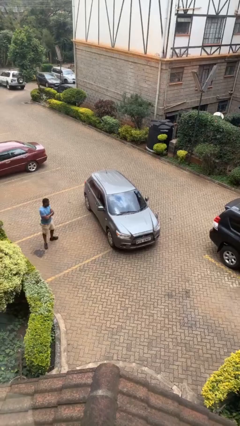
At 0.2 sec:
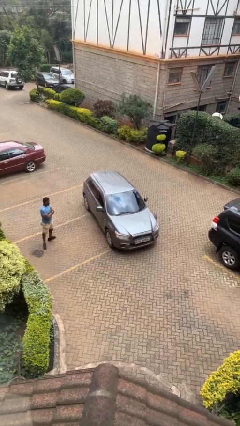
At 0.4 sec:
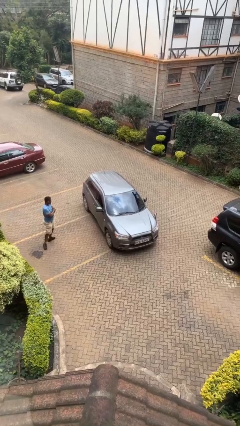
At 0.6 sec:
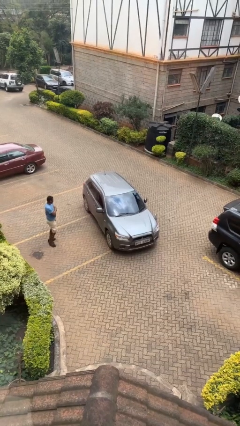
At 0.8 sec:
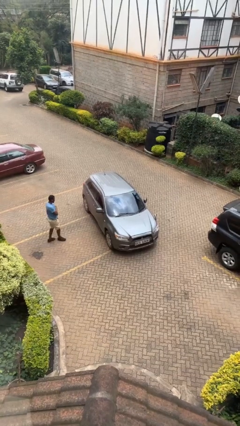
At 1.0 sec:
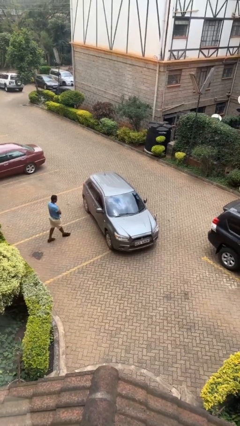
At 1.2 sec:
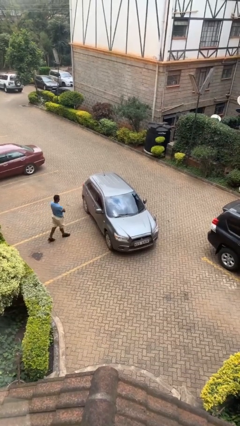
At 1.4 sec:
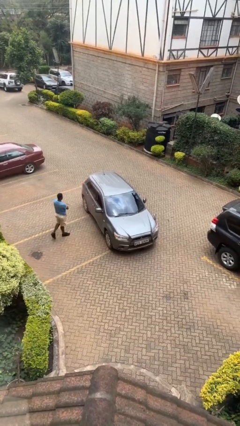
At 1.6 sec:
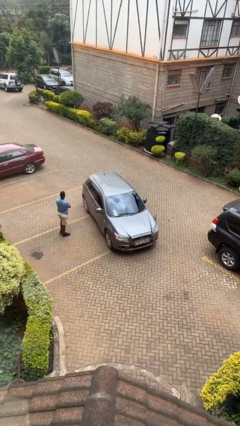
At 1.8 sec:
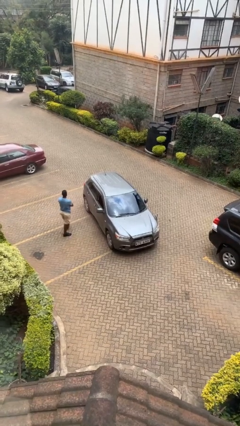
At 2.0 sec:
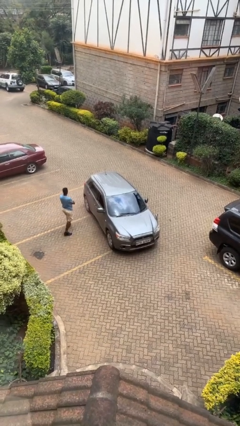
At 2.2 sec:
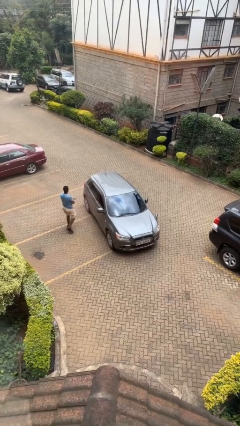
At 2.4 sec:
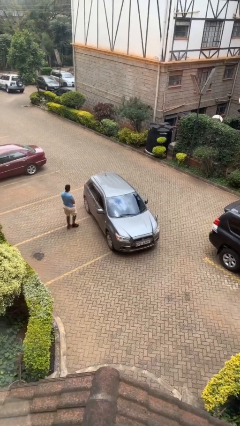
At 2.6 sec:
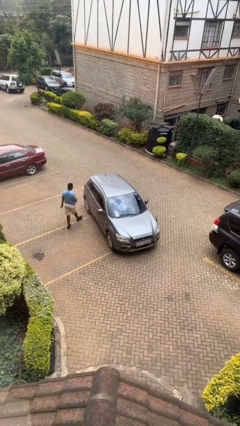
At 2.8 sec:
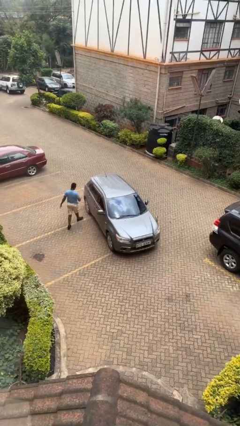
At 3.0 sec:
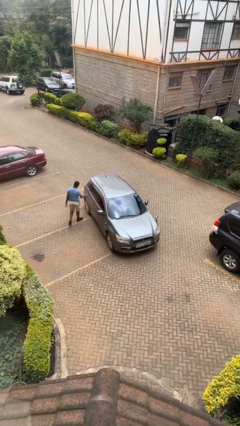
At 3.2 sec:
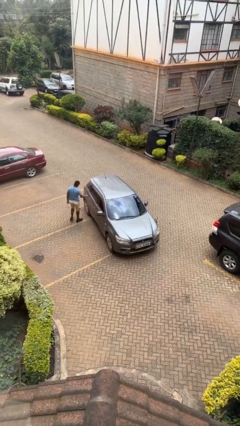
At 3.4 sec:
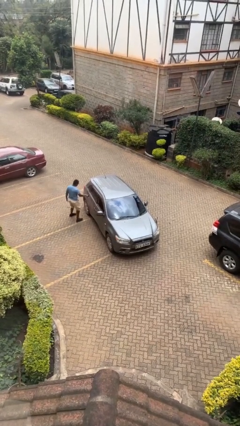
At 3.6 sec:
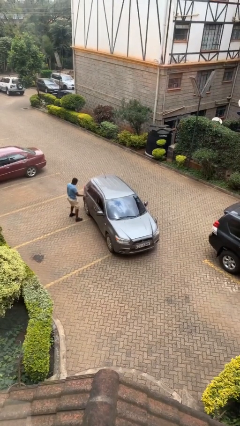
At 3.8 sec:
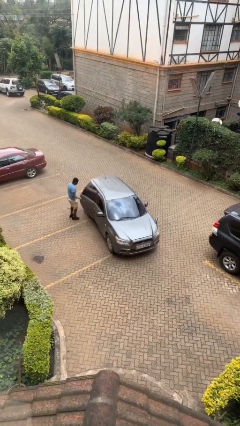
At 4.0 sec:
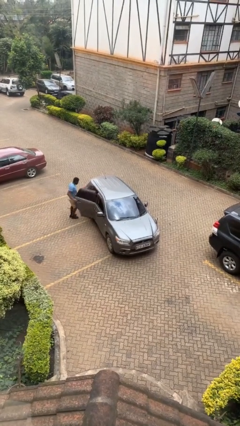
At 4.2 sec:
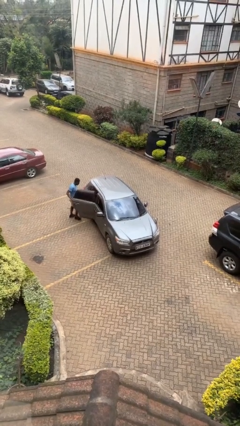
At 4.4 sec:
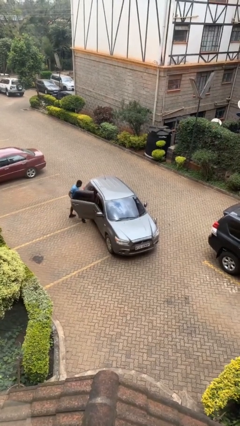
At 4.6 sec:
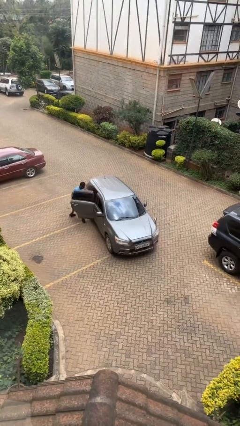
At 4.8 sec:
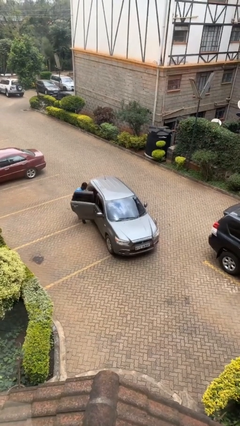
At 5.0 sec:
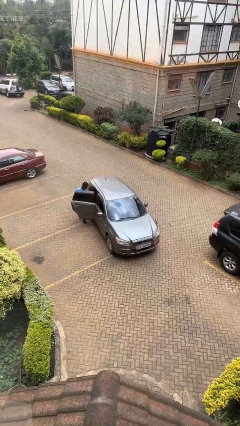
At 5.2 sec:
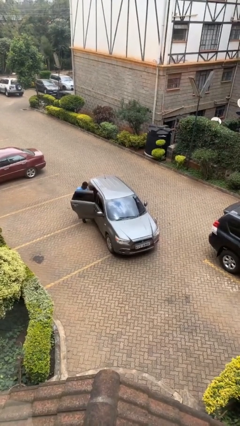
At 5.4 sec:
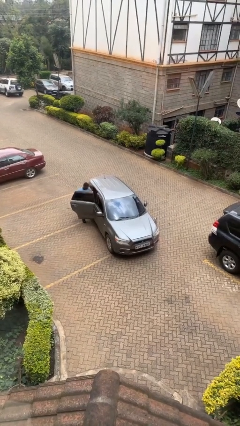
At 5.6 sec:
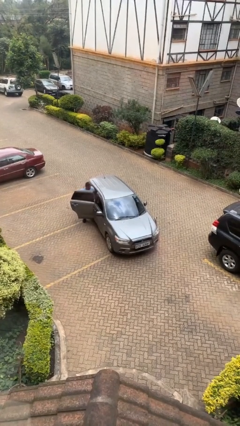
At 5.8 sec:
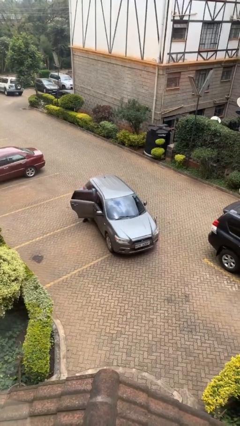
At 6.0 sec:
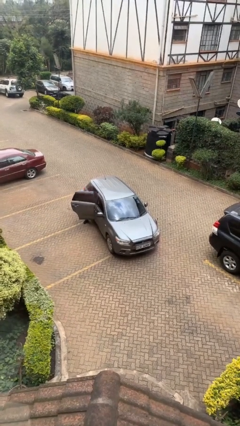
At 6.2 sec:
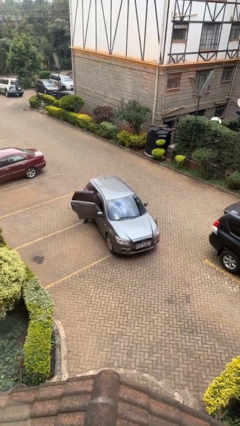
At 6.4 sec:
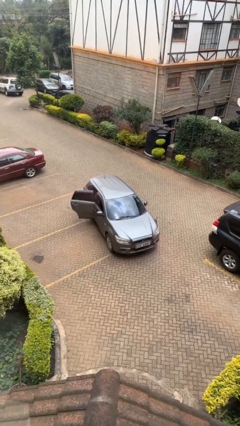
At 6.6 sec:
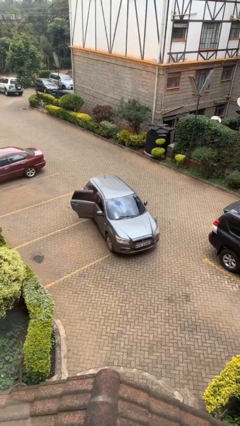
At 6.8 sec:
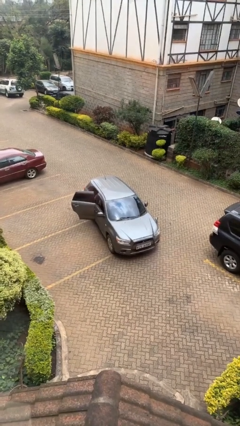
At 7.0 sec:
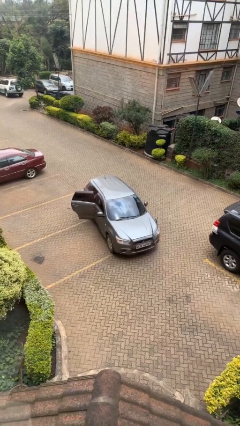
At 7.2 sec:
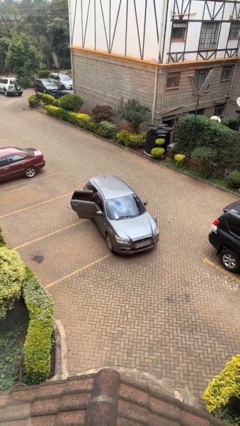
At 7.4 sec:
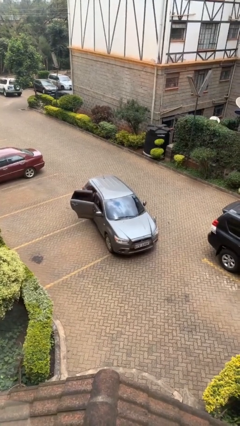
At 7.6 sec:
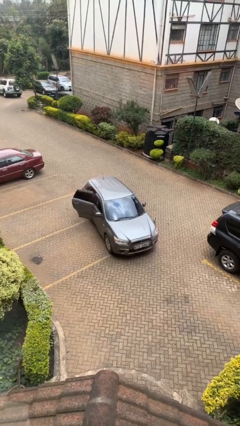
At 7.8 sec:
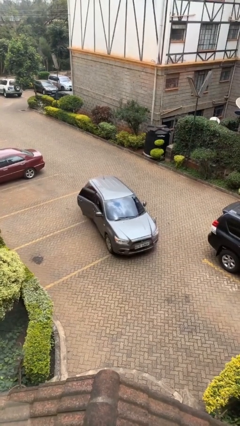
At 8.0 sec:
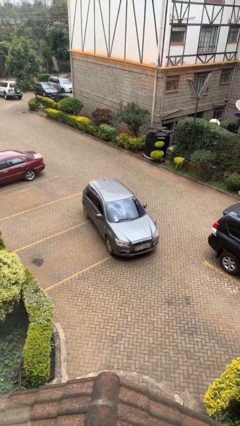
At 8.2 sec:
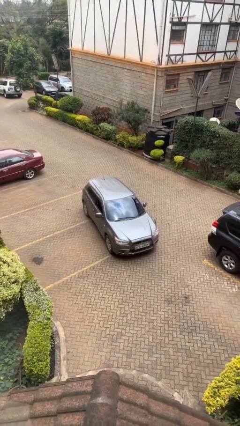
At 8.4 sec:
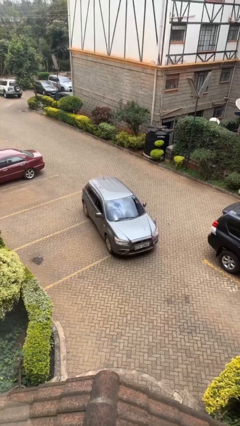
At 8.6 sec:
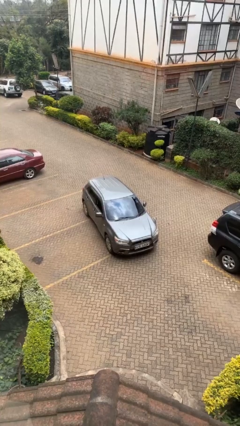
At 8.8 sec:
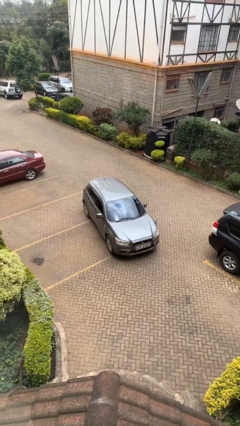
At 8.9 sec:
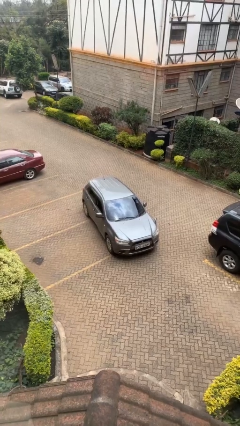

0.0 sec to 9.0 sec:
car picks up person

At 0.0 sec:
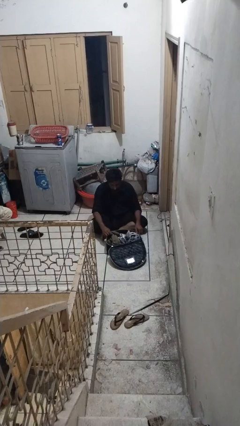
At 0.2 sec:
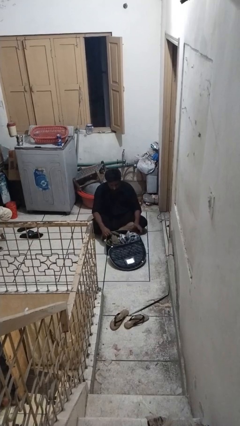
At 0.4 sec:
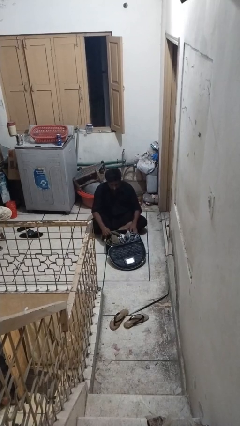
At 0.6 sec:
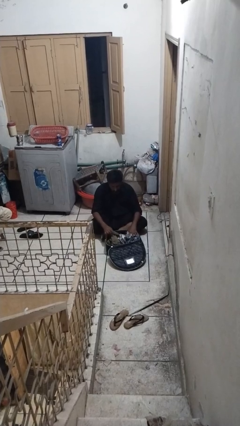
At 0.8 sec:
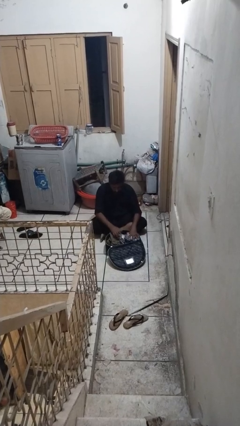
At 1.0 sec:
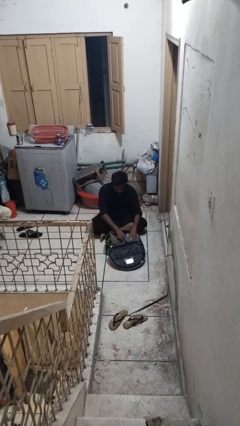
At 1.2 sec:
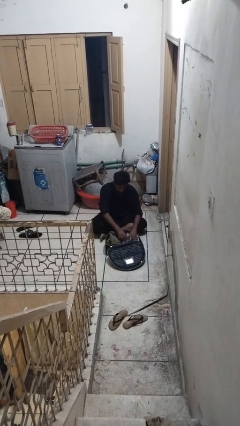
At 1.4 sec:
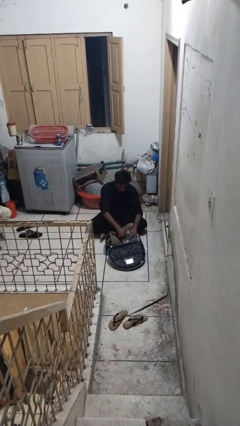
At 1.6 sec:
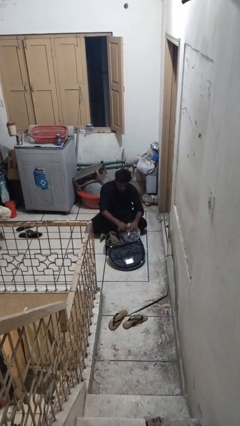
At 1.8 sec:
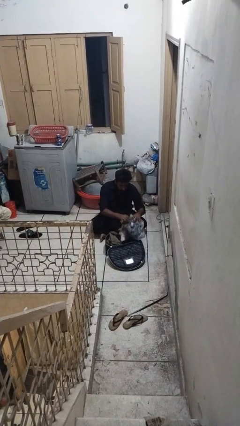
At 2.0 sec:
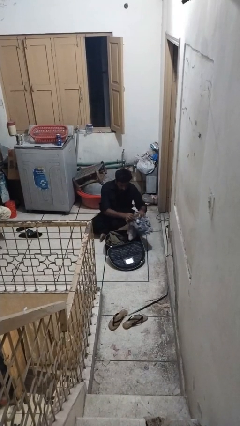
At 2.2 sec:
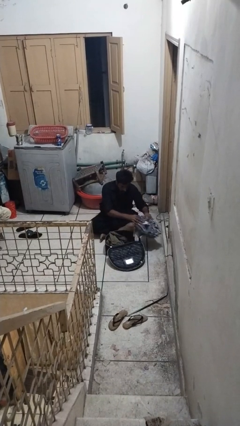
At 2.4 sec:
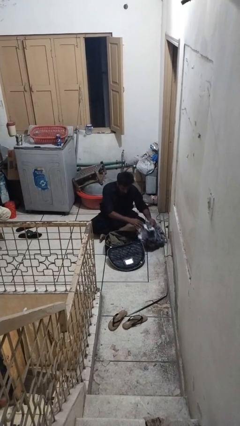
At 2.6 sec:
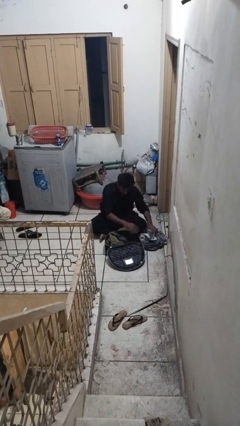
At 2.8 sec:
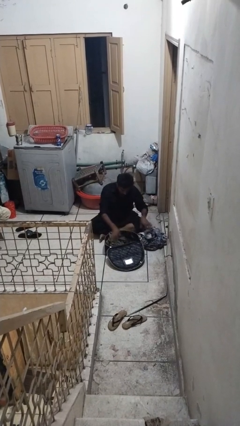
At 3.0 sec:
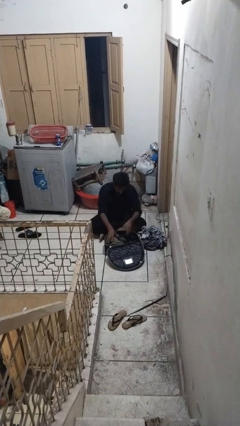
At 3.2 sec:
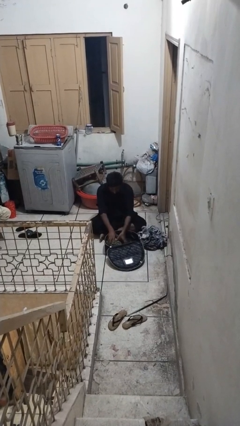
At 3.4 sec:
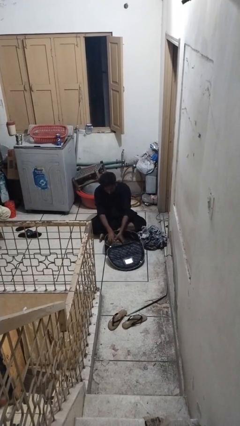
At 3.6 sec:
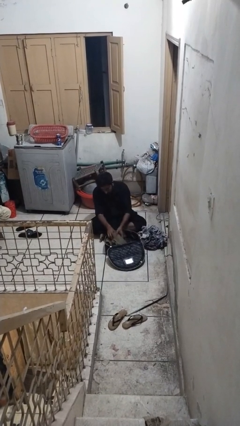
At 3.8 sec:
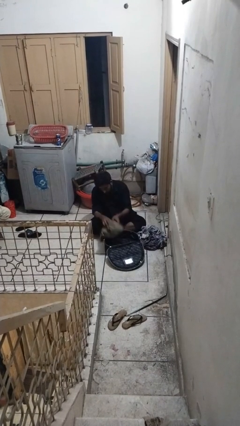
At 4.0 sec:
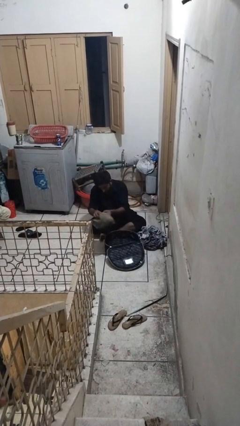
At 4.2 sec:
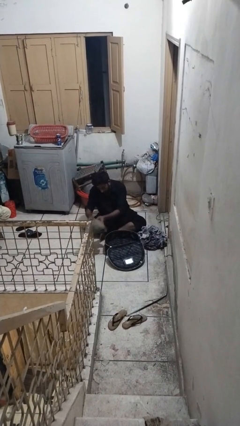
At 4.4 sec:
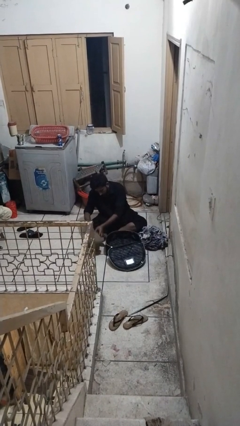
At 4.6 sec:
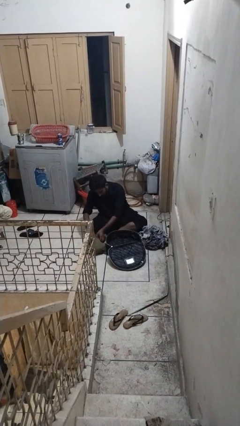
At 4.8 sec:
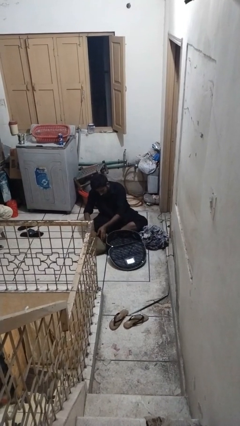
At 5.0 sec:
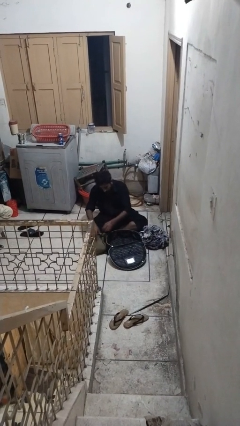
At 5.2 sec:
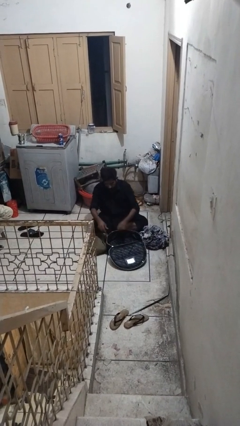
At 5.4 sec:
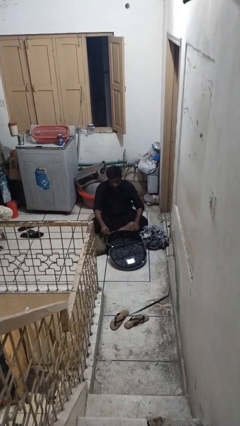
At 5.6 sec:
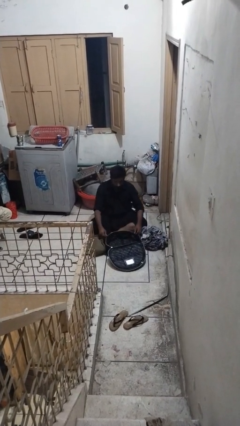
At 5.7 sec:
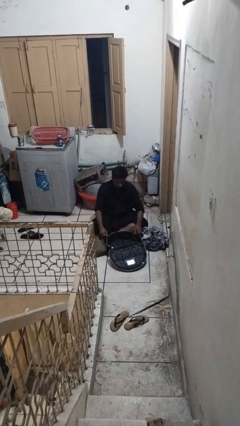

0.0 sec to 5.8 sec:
person unloads clothes from suitcase

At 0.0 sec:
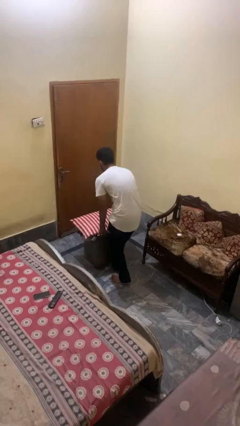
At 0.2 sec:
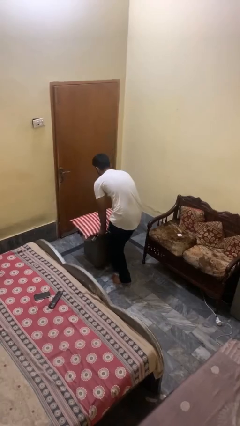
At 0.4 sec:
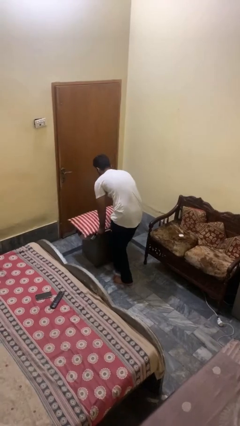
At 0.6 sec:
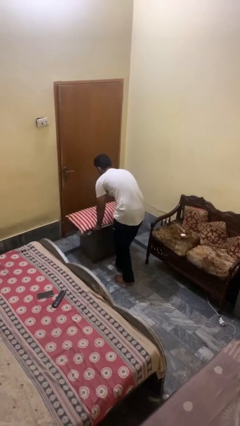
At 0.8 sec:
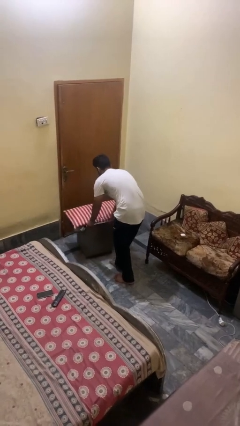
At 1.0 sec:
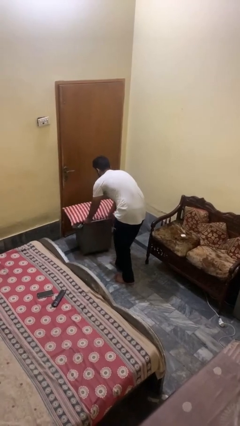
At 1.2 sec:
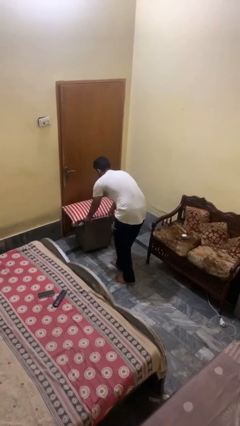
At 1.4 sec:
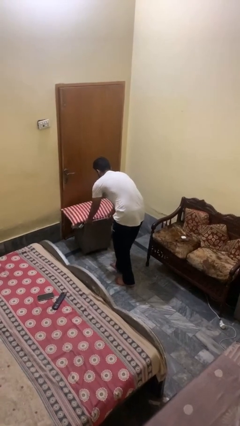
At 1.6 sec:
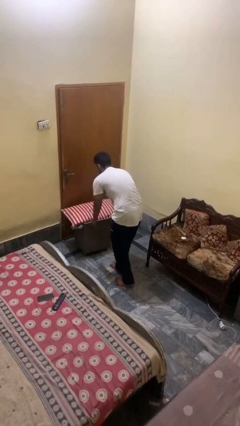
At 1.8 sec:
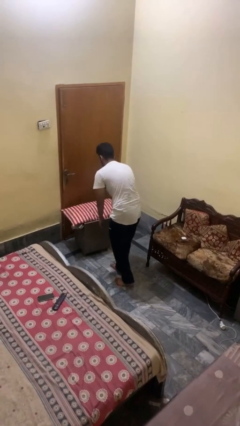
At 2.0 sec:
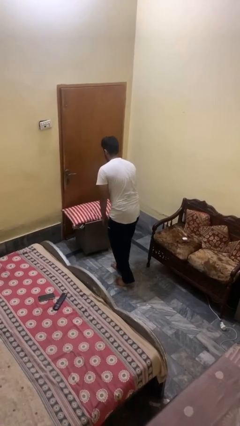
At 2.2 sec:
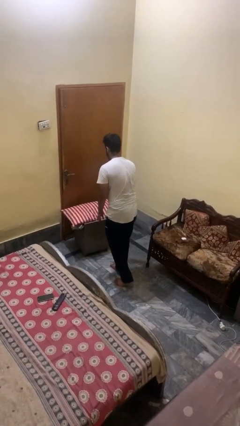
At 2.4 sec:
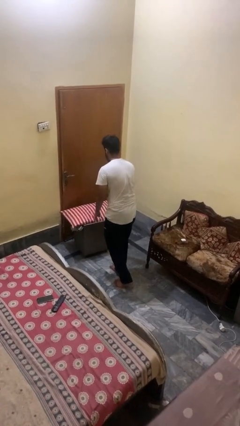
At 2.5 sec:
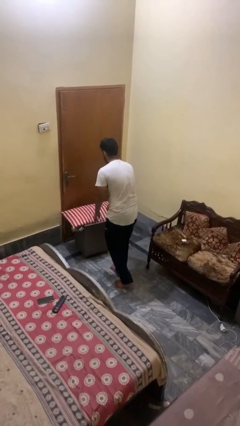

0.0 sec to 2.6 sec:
person pushes wheeled cart

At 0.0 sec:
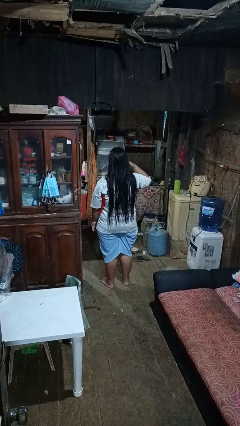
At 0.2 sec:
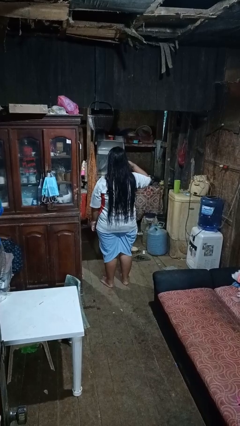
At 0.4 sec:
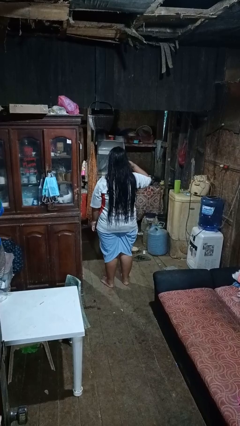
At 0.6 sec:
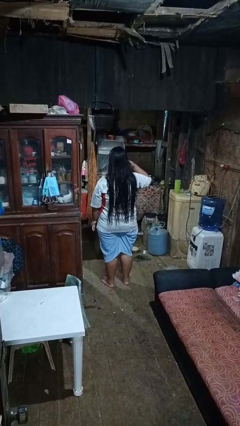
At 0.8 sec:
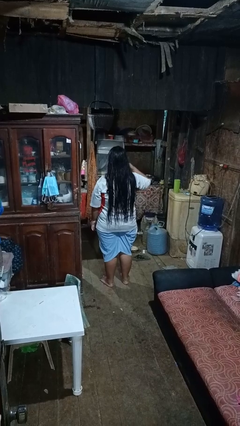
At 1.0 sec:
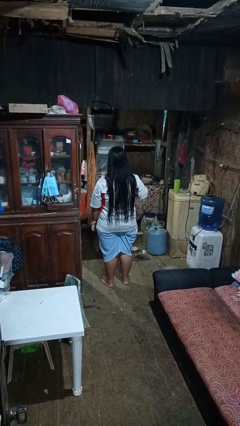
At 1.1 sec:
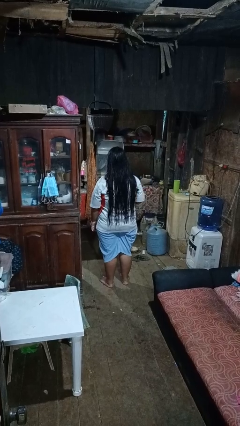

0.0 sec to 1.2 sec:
person gestures call me
